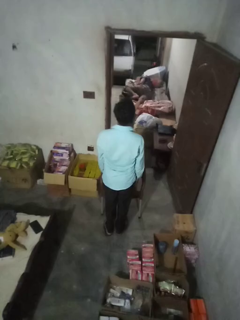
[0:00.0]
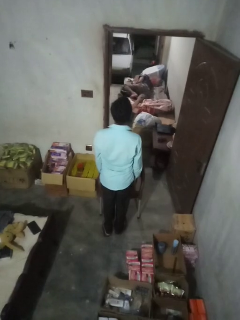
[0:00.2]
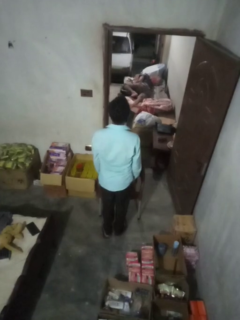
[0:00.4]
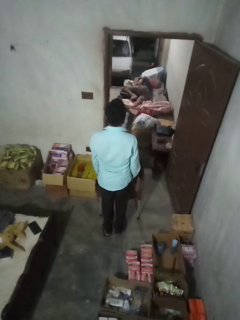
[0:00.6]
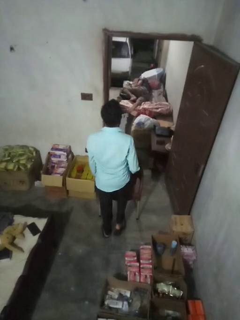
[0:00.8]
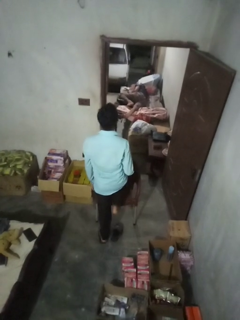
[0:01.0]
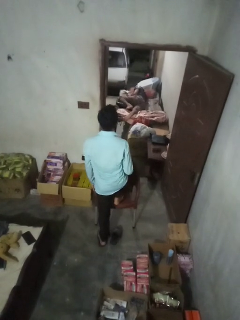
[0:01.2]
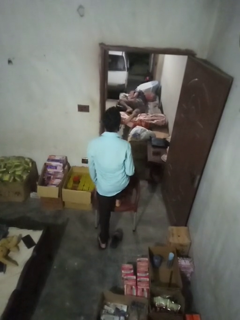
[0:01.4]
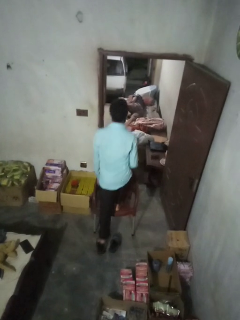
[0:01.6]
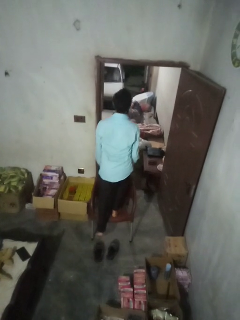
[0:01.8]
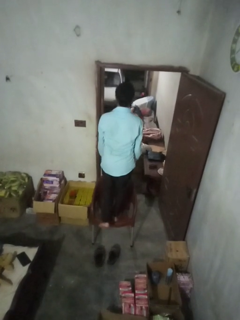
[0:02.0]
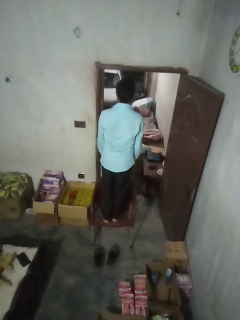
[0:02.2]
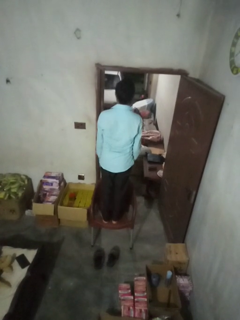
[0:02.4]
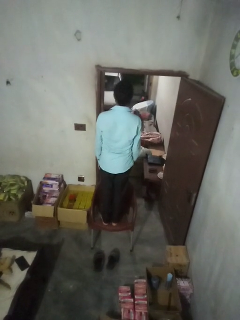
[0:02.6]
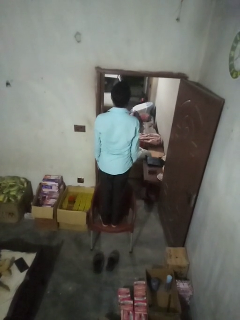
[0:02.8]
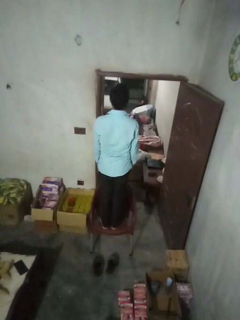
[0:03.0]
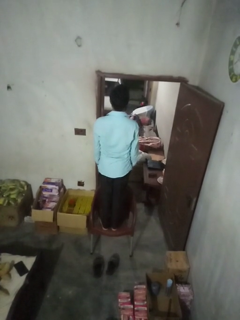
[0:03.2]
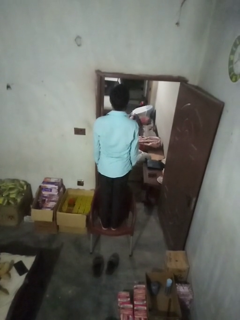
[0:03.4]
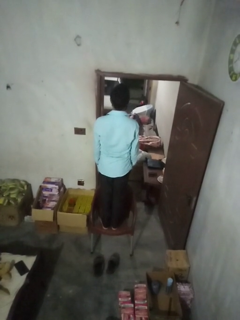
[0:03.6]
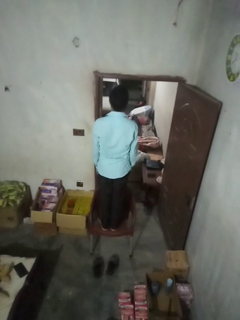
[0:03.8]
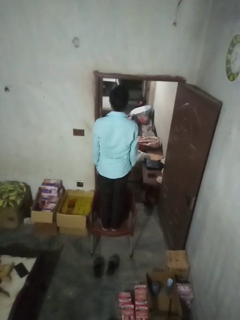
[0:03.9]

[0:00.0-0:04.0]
person climbs on chair

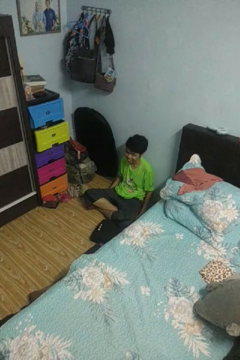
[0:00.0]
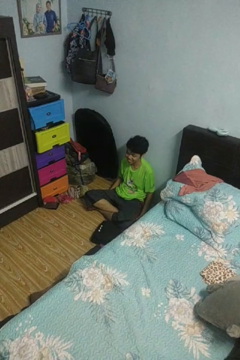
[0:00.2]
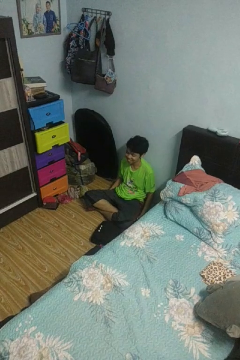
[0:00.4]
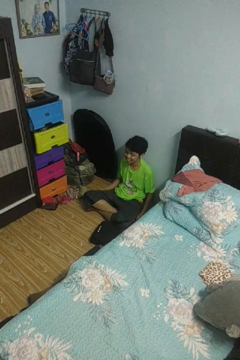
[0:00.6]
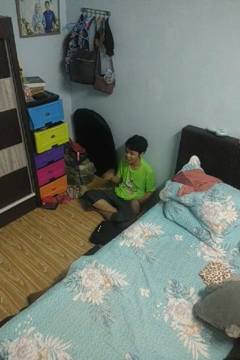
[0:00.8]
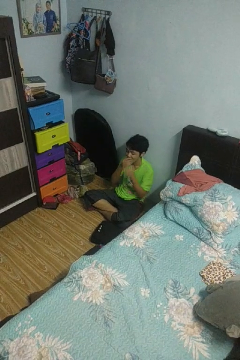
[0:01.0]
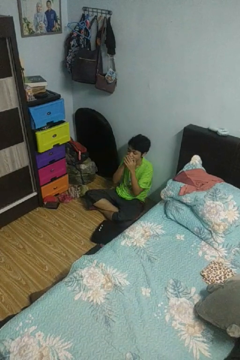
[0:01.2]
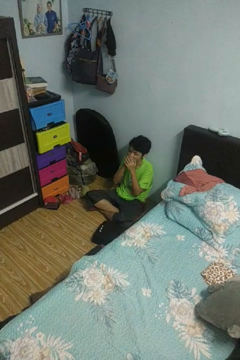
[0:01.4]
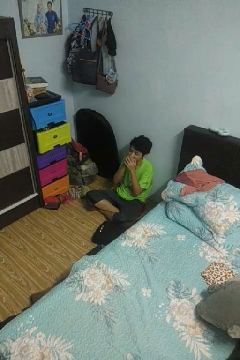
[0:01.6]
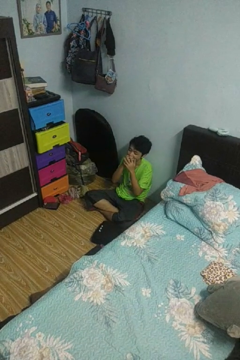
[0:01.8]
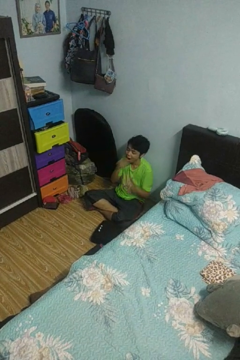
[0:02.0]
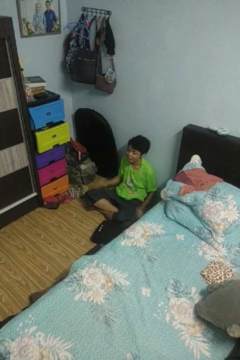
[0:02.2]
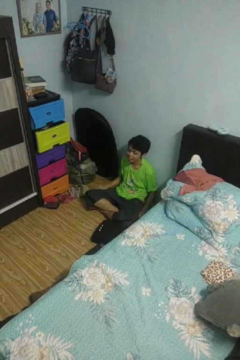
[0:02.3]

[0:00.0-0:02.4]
person yawns

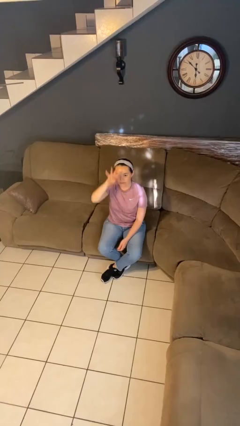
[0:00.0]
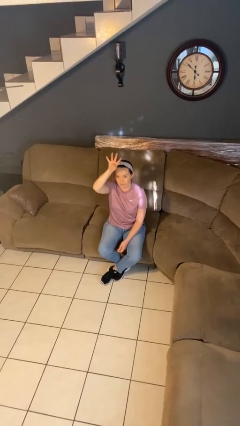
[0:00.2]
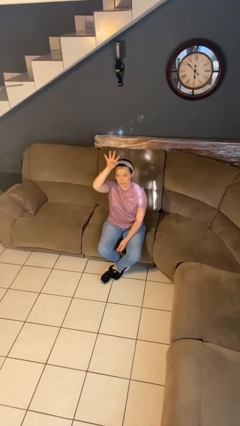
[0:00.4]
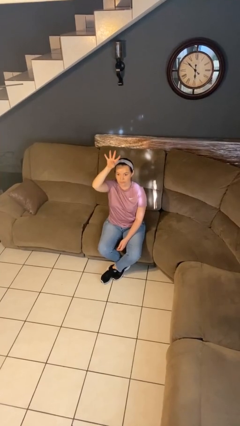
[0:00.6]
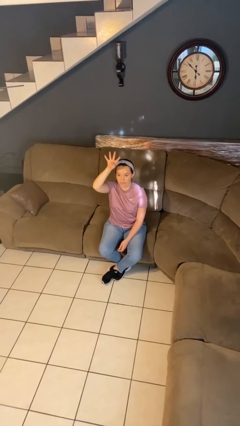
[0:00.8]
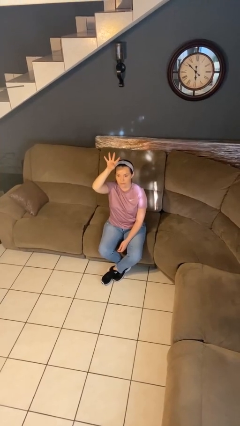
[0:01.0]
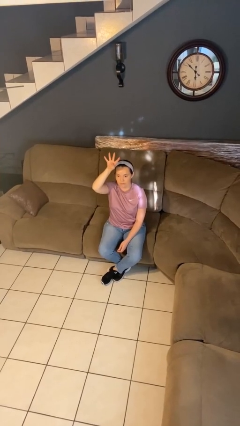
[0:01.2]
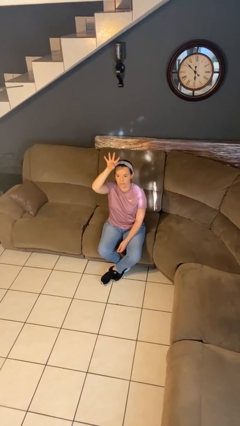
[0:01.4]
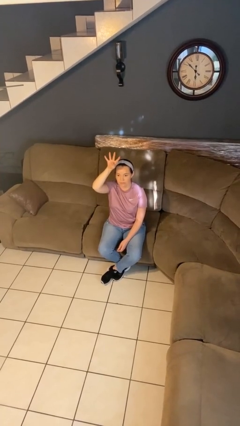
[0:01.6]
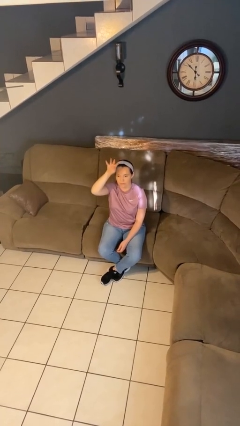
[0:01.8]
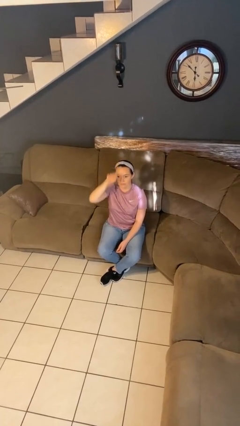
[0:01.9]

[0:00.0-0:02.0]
person gestures number four

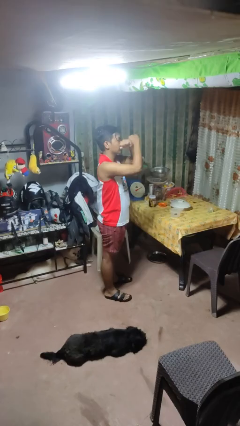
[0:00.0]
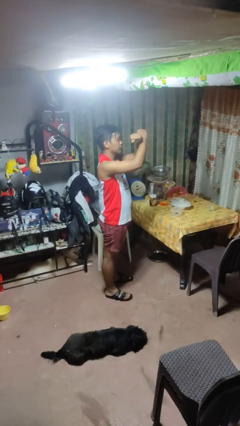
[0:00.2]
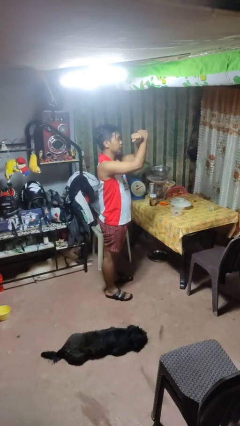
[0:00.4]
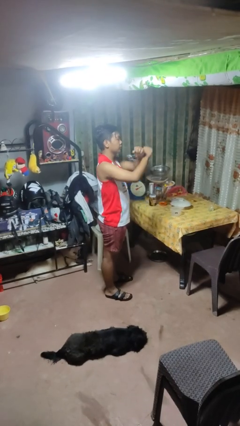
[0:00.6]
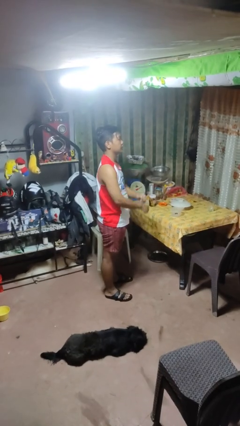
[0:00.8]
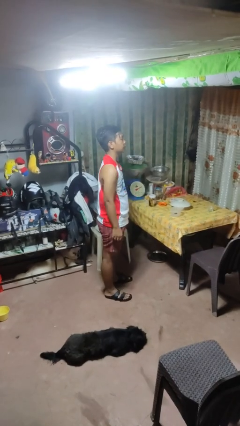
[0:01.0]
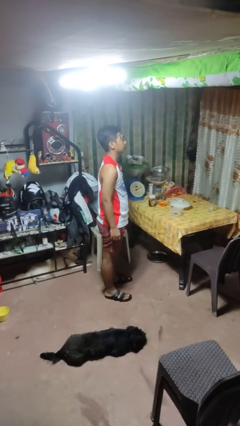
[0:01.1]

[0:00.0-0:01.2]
person gestures arms x

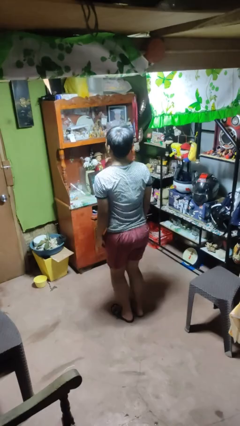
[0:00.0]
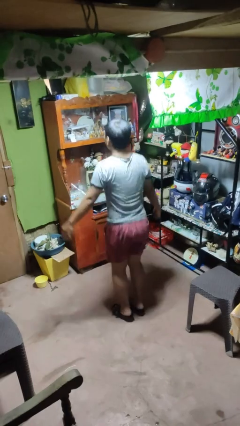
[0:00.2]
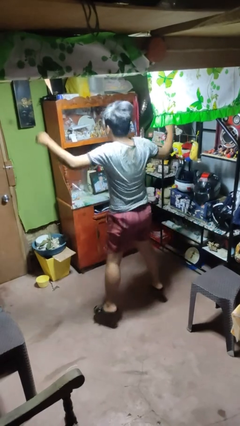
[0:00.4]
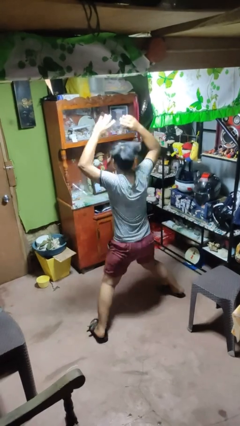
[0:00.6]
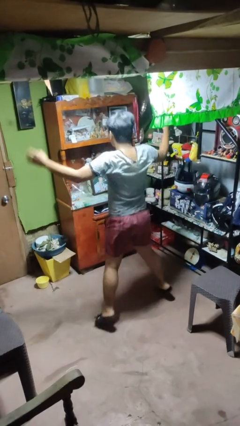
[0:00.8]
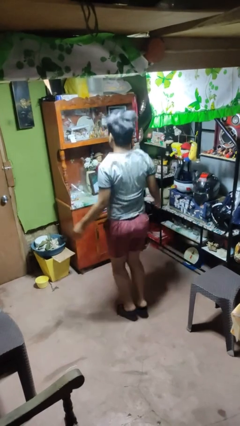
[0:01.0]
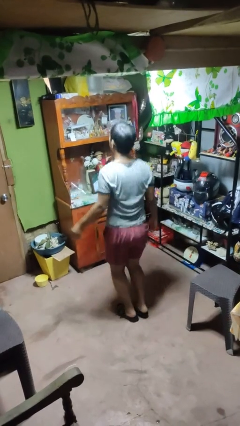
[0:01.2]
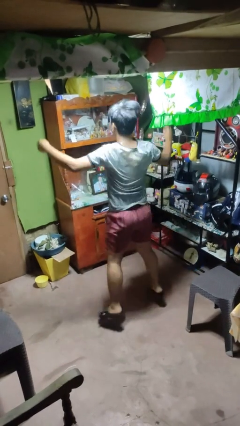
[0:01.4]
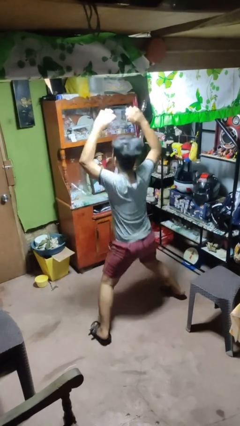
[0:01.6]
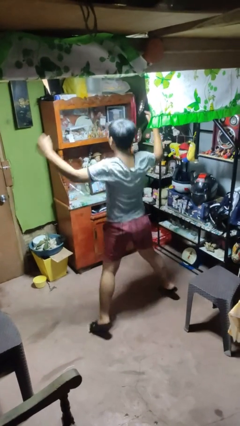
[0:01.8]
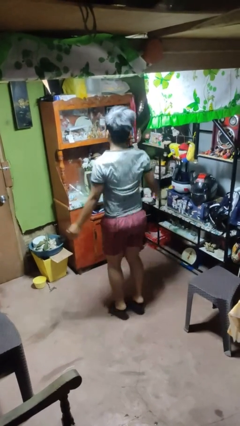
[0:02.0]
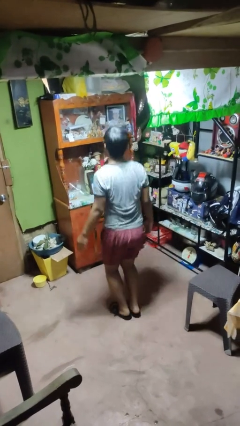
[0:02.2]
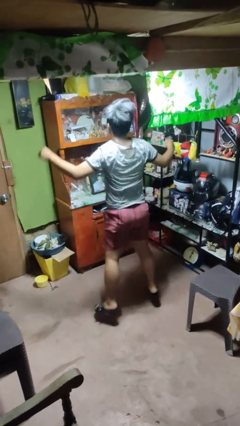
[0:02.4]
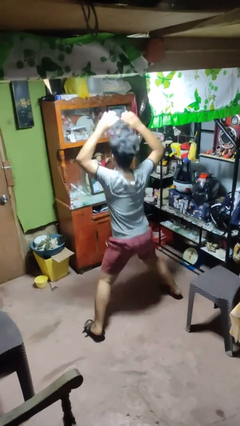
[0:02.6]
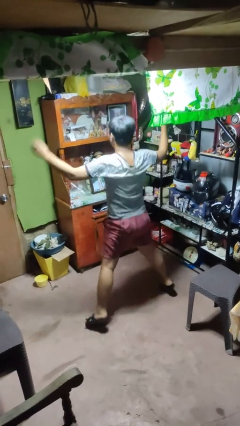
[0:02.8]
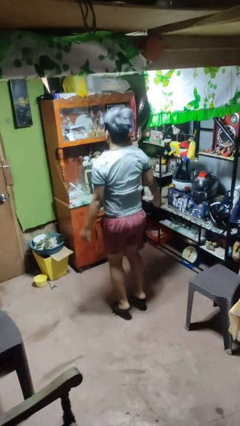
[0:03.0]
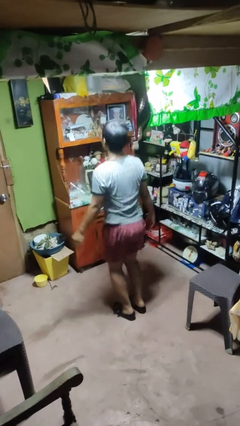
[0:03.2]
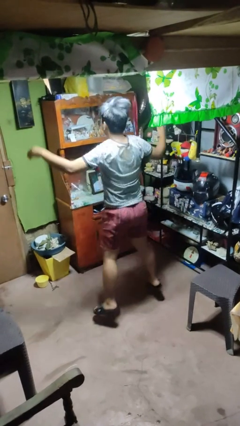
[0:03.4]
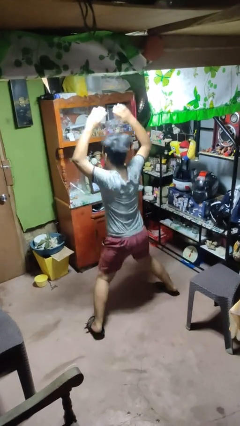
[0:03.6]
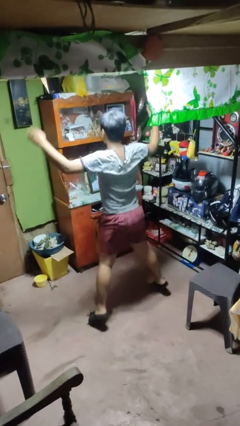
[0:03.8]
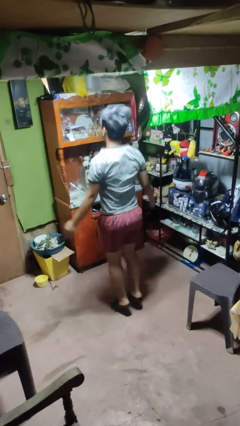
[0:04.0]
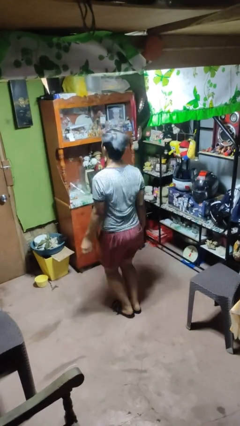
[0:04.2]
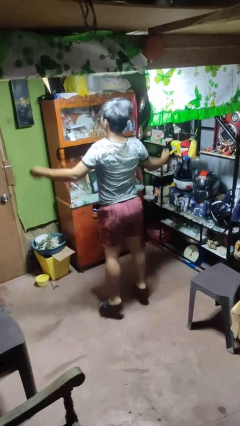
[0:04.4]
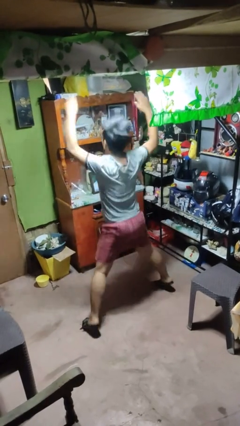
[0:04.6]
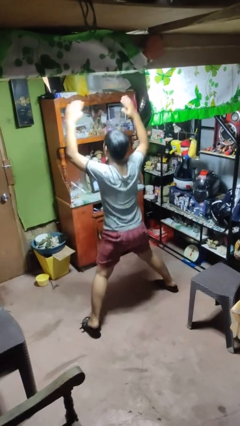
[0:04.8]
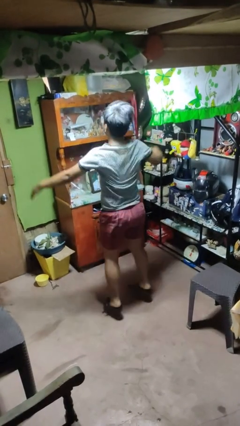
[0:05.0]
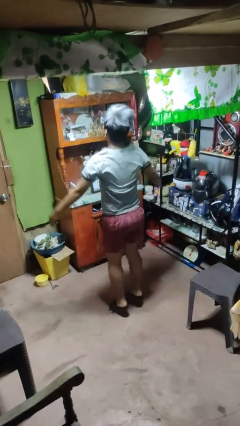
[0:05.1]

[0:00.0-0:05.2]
person exercises with jumping jacks

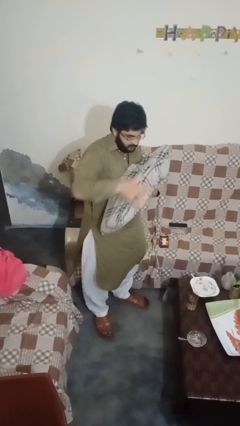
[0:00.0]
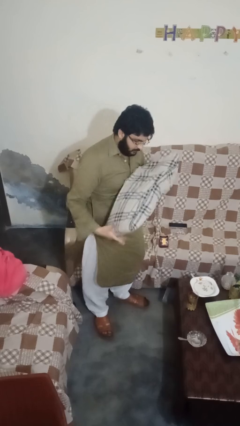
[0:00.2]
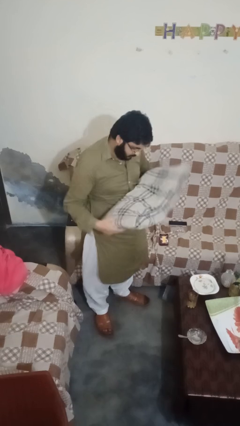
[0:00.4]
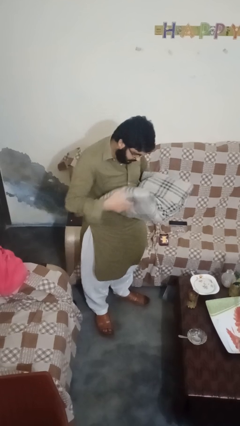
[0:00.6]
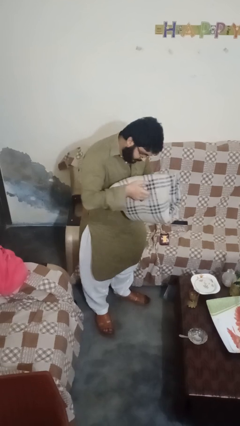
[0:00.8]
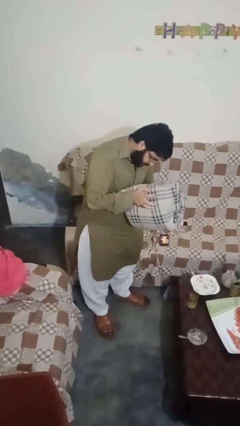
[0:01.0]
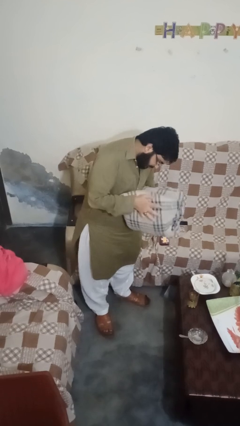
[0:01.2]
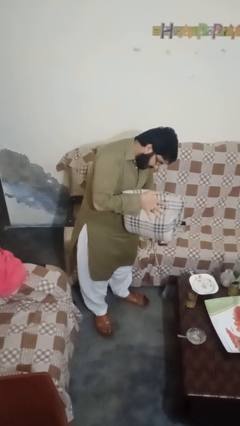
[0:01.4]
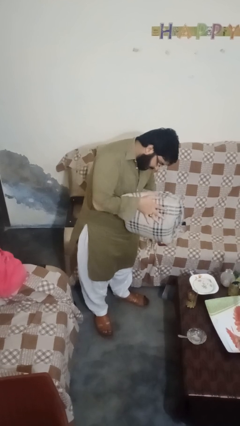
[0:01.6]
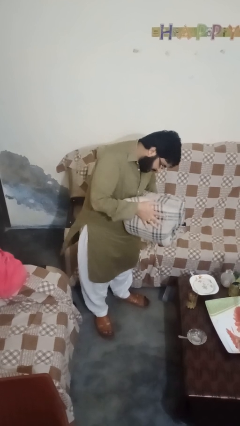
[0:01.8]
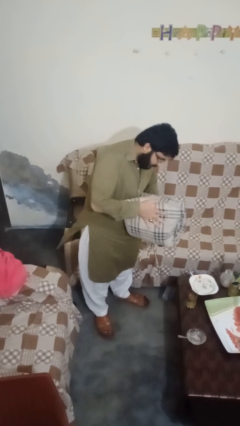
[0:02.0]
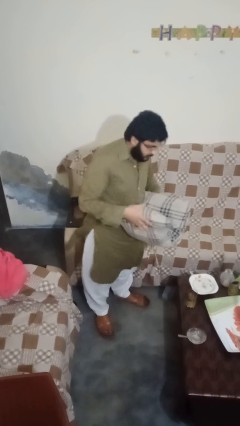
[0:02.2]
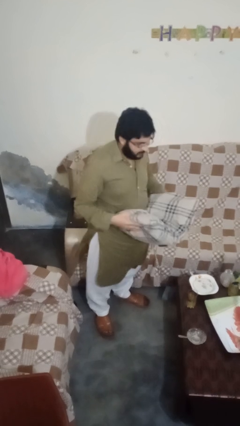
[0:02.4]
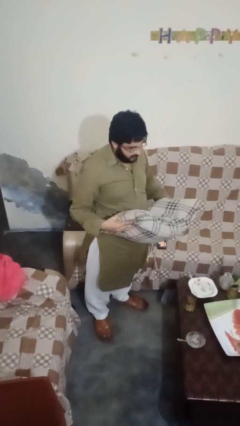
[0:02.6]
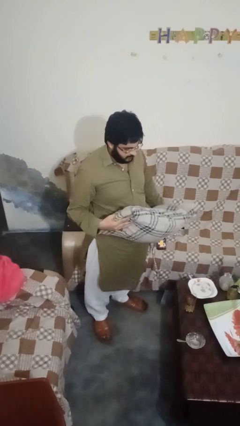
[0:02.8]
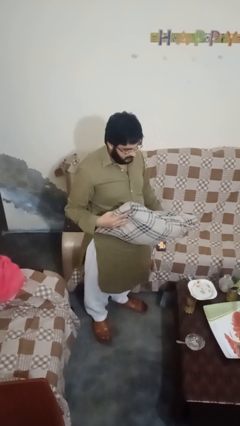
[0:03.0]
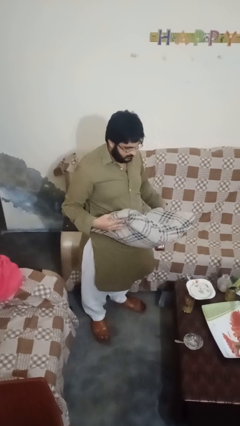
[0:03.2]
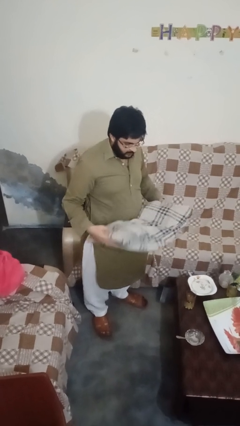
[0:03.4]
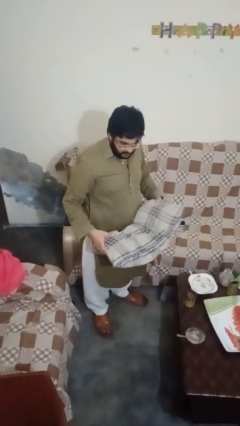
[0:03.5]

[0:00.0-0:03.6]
person squeezes object

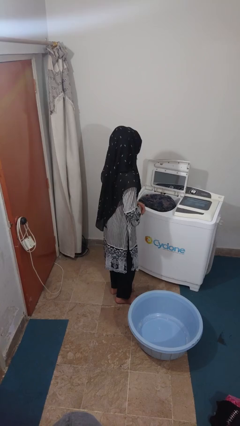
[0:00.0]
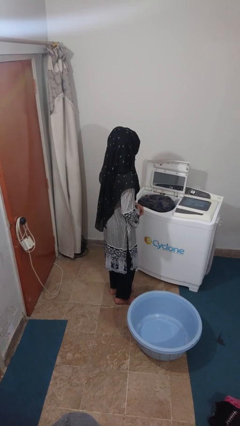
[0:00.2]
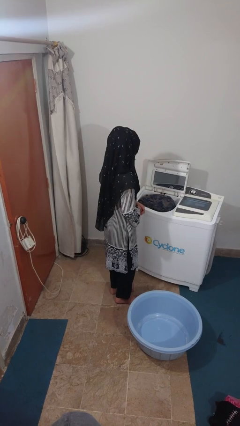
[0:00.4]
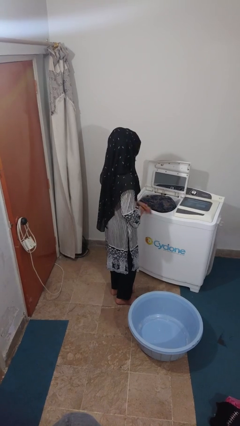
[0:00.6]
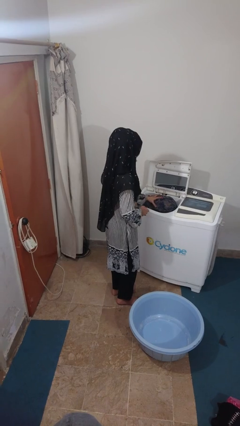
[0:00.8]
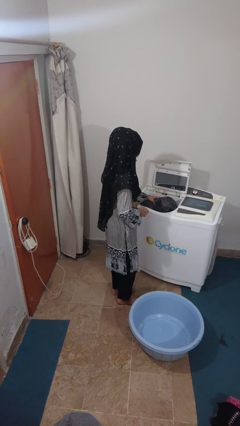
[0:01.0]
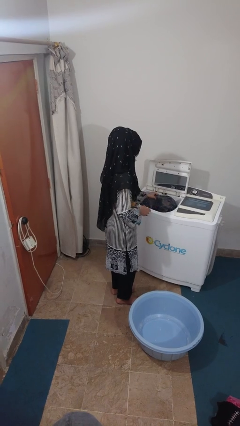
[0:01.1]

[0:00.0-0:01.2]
person loads clotheswasher
